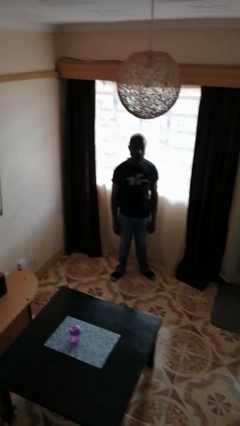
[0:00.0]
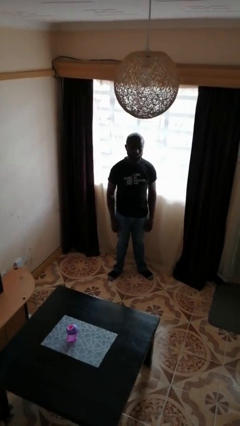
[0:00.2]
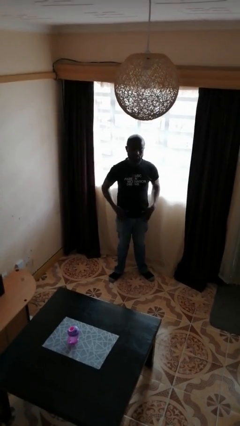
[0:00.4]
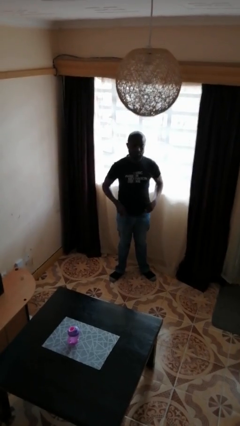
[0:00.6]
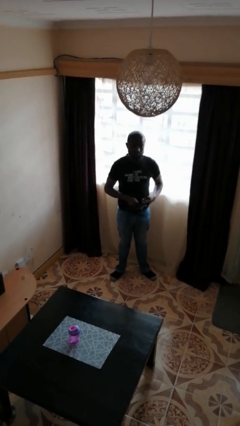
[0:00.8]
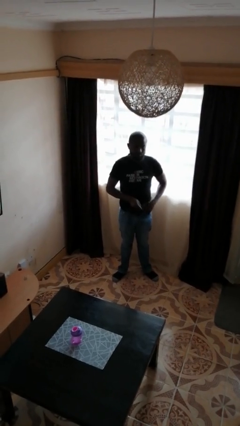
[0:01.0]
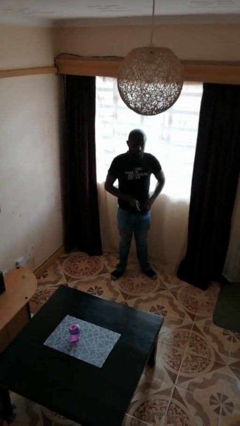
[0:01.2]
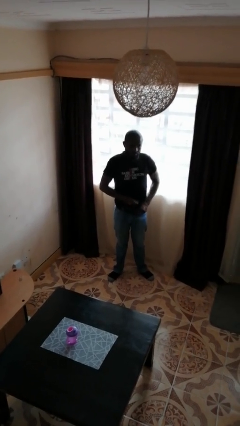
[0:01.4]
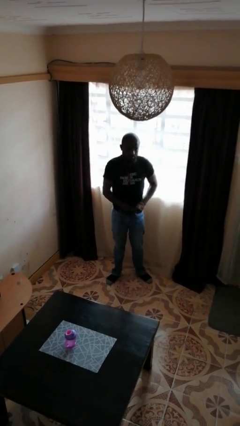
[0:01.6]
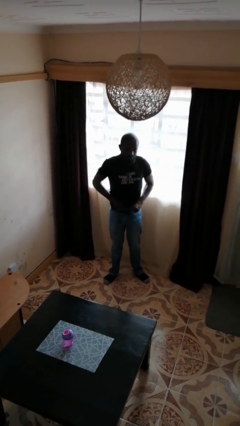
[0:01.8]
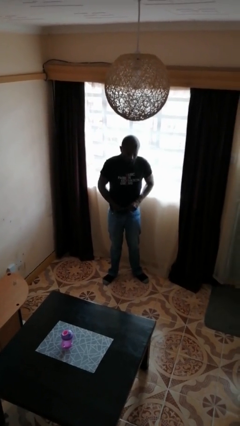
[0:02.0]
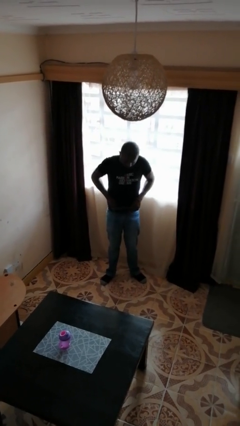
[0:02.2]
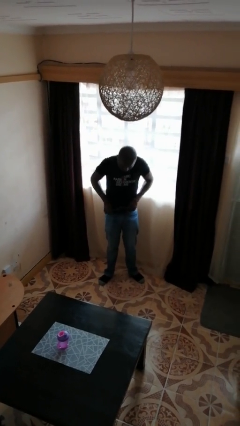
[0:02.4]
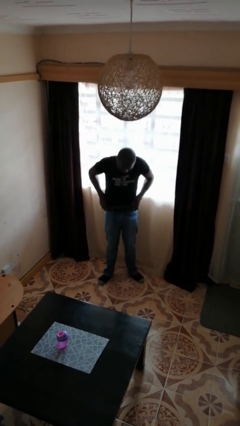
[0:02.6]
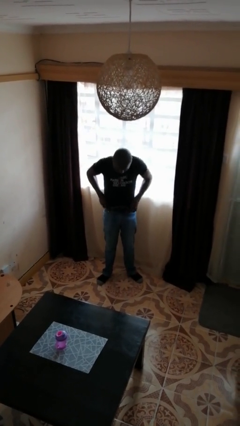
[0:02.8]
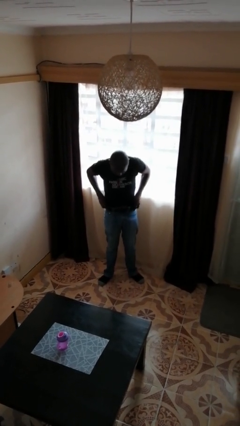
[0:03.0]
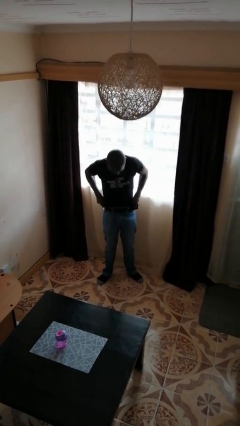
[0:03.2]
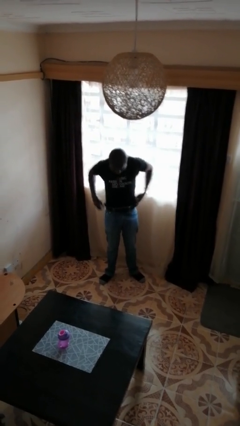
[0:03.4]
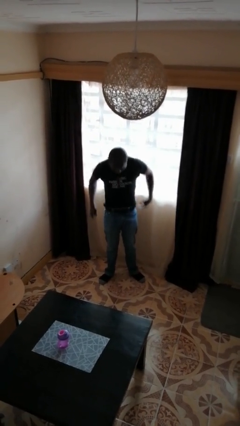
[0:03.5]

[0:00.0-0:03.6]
person tucks in shirt

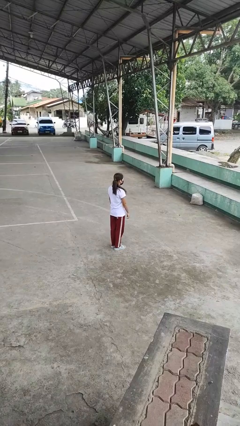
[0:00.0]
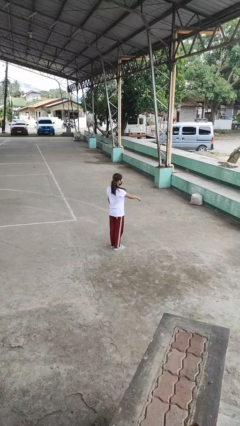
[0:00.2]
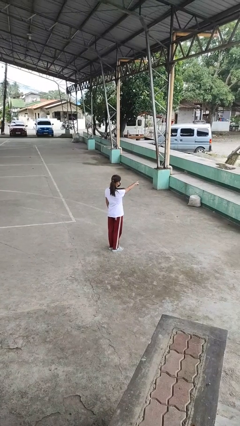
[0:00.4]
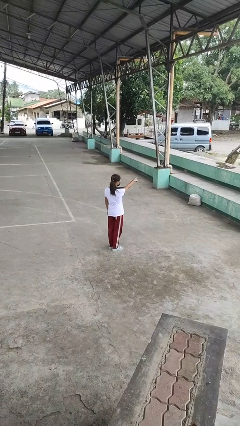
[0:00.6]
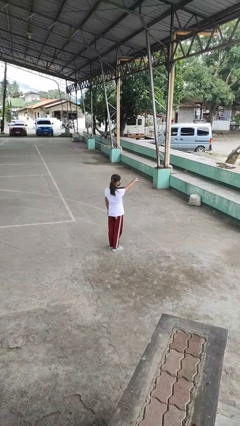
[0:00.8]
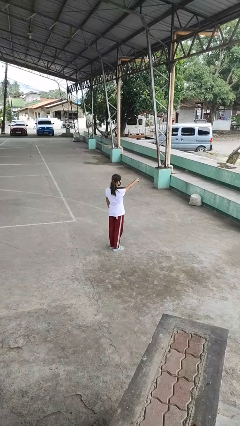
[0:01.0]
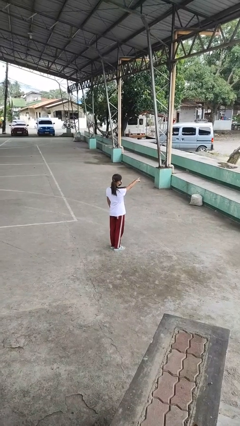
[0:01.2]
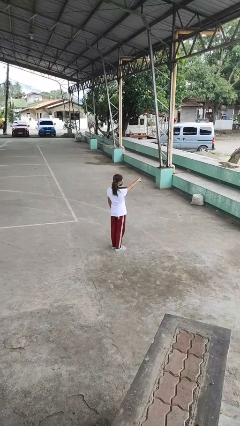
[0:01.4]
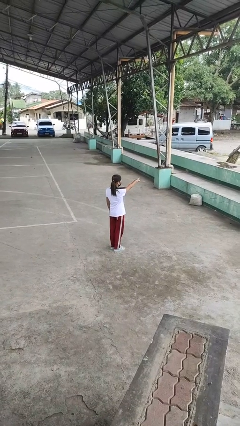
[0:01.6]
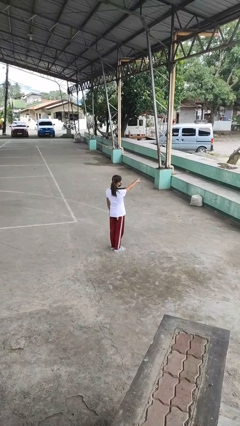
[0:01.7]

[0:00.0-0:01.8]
person points at person

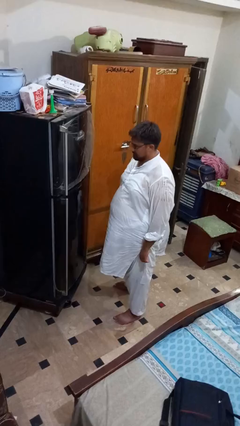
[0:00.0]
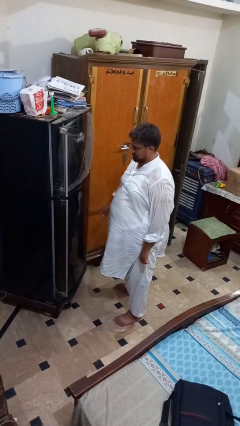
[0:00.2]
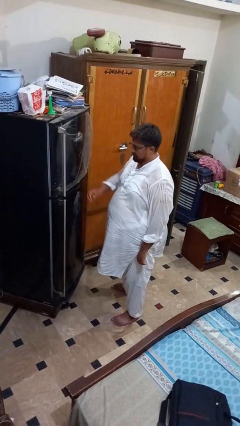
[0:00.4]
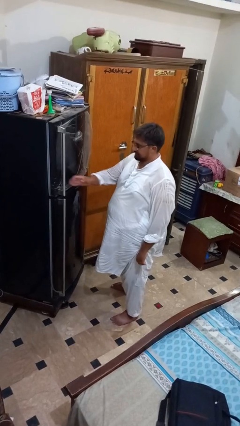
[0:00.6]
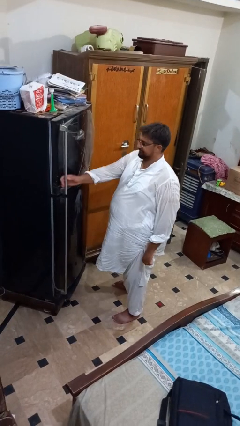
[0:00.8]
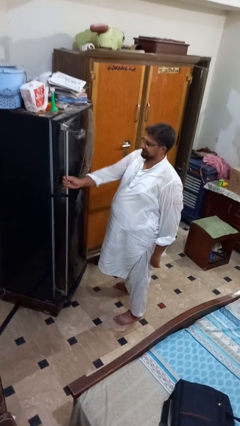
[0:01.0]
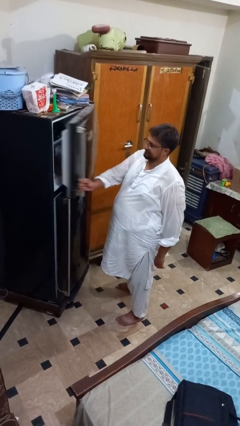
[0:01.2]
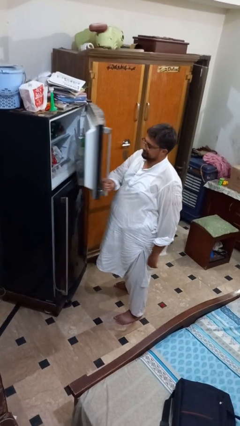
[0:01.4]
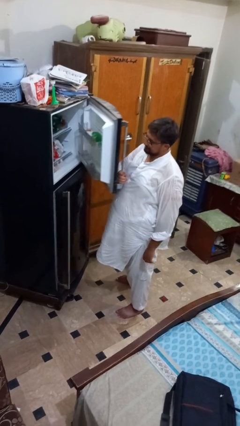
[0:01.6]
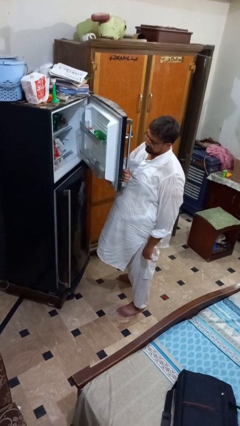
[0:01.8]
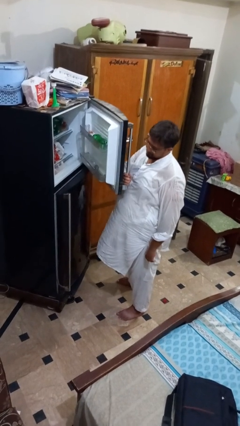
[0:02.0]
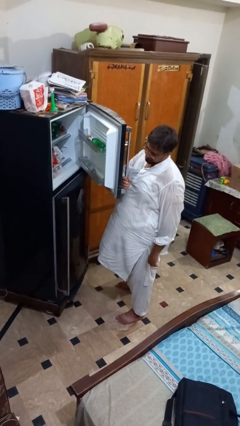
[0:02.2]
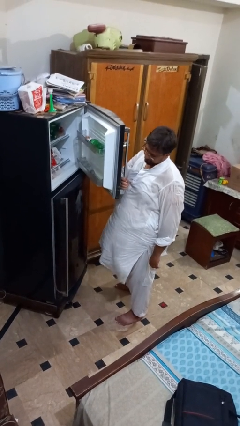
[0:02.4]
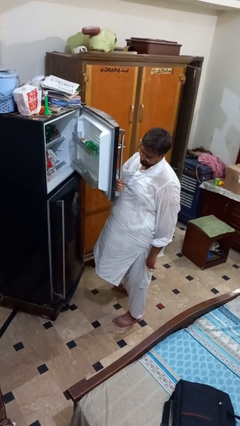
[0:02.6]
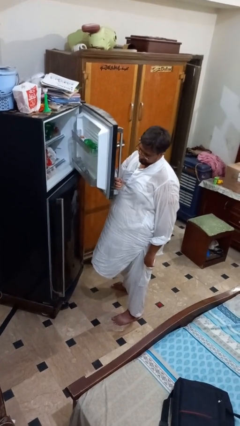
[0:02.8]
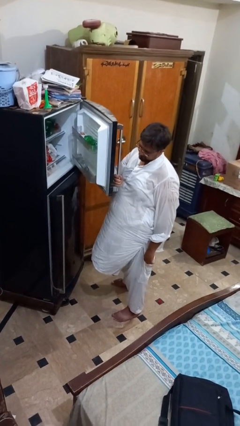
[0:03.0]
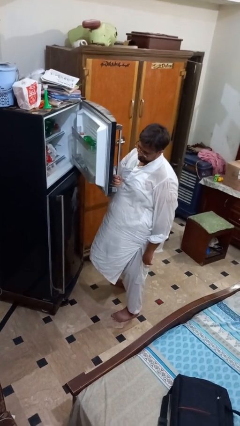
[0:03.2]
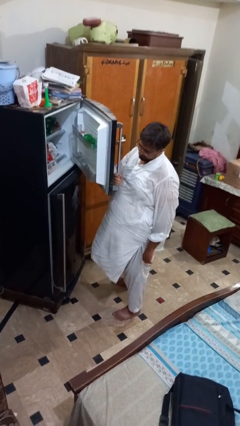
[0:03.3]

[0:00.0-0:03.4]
person opens refrigerator

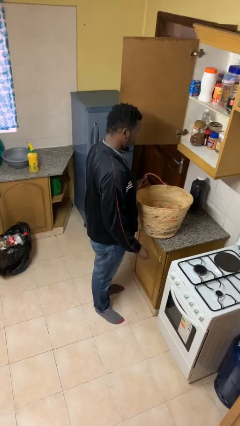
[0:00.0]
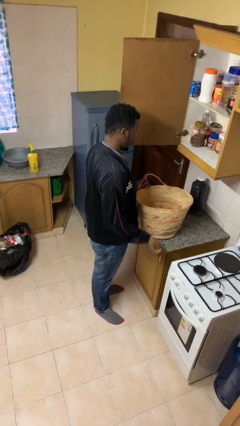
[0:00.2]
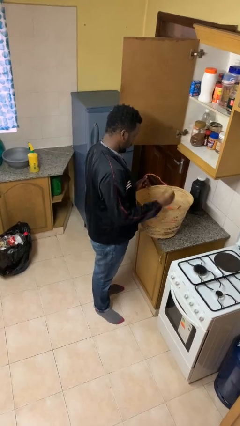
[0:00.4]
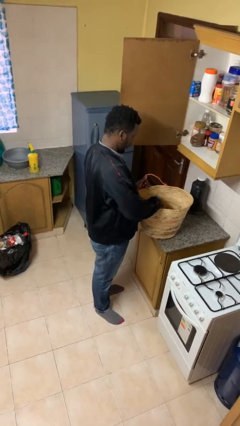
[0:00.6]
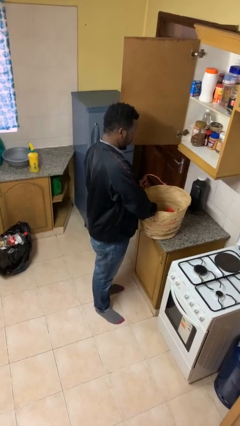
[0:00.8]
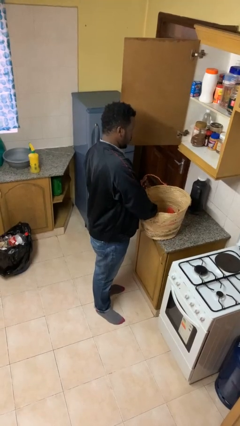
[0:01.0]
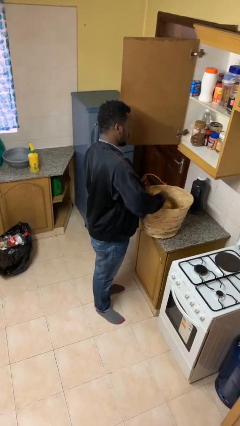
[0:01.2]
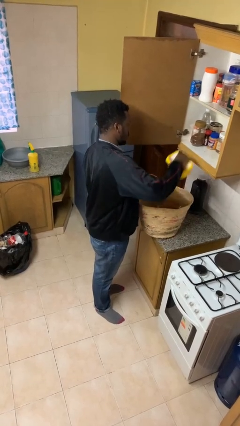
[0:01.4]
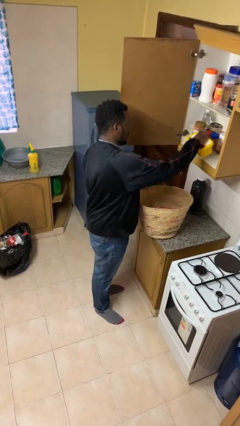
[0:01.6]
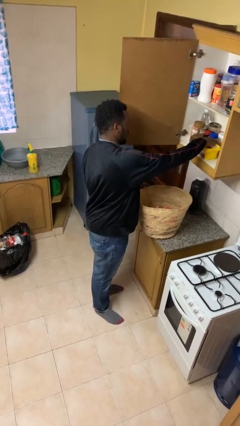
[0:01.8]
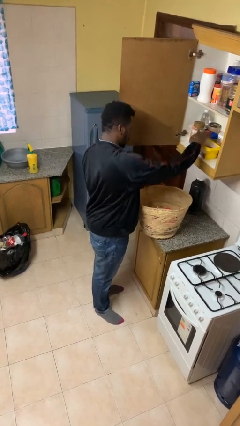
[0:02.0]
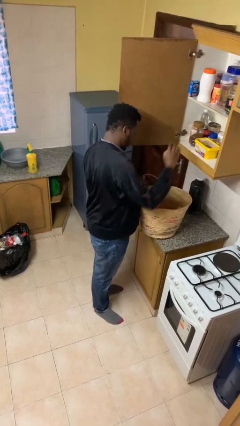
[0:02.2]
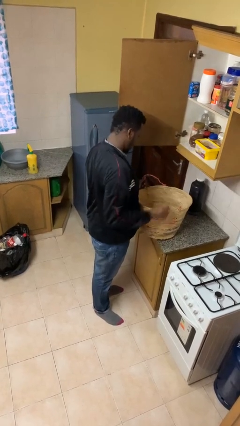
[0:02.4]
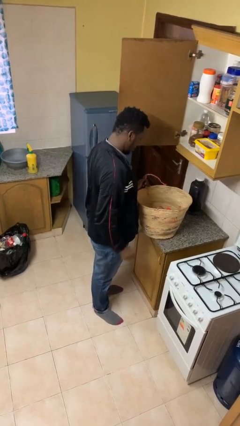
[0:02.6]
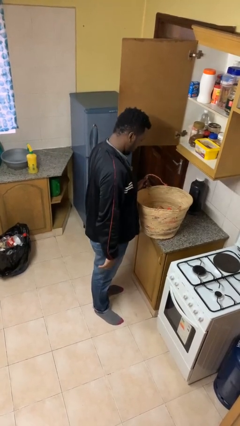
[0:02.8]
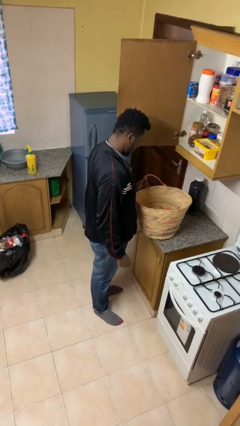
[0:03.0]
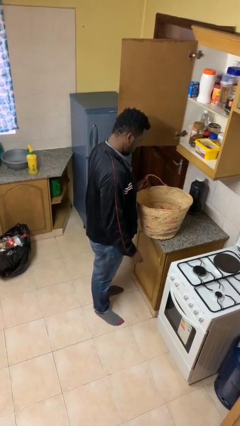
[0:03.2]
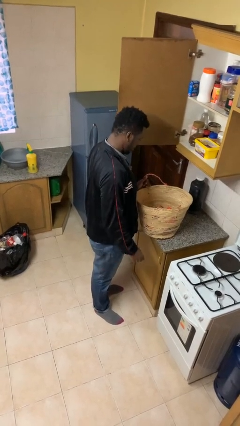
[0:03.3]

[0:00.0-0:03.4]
person loads groceries into cabinet

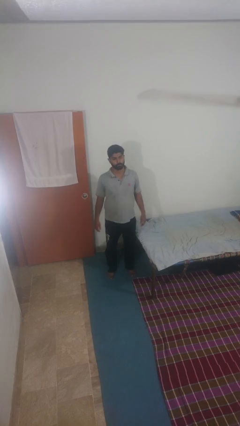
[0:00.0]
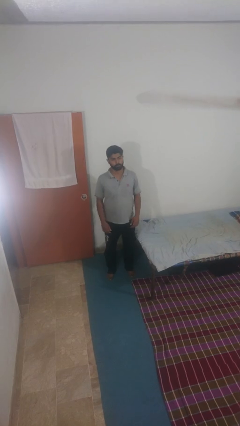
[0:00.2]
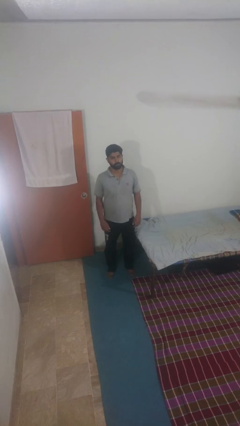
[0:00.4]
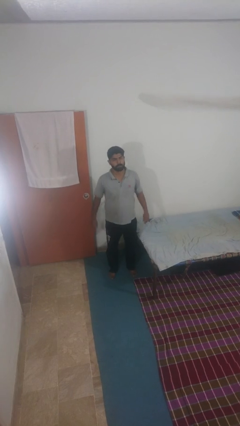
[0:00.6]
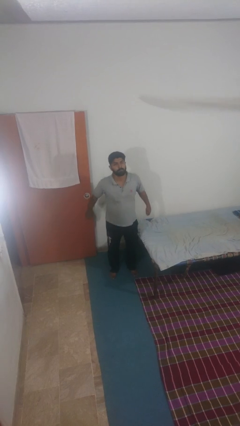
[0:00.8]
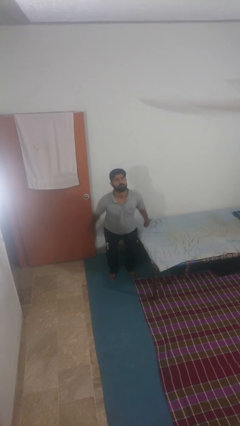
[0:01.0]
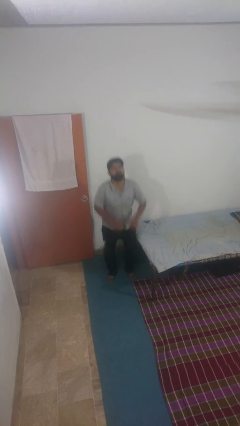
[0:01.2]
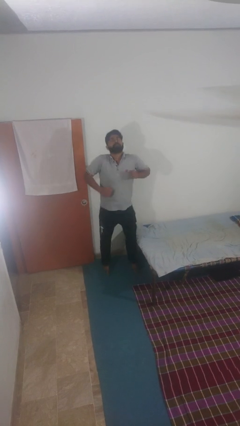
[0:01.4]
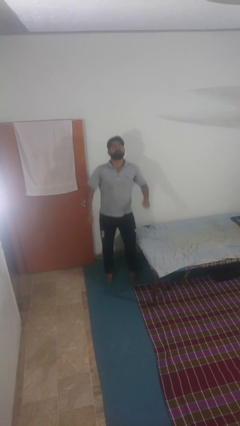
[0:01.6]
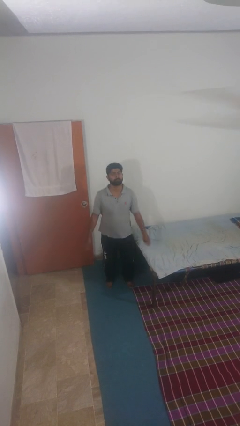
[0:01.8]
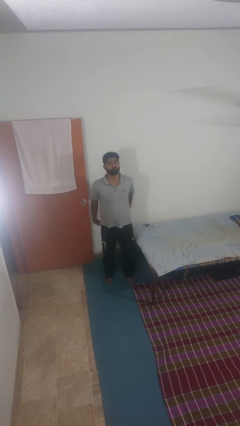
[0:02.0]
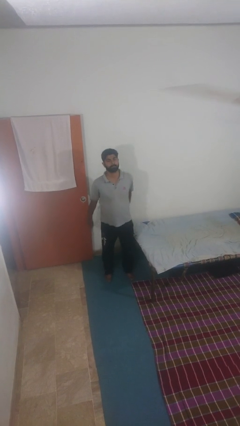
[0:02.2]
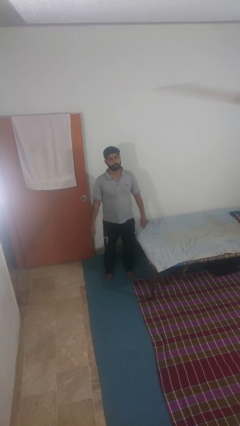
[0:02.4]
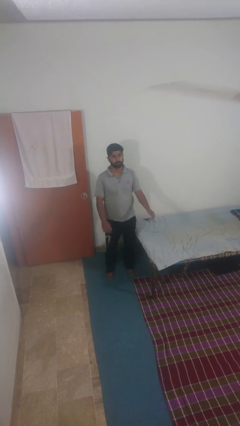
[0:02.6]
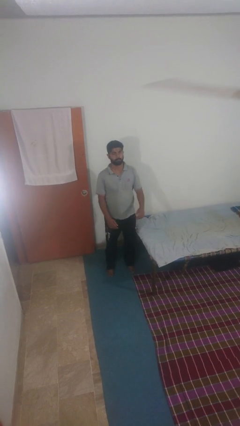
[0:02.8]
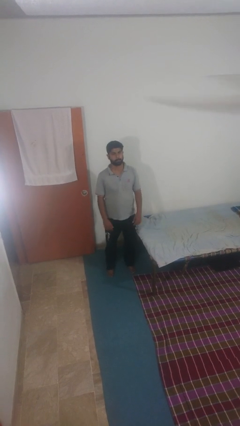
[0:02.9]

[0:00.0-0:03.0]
person jumps

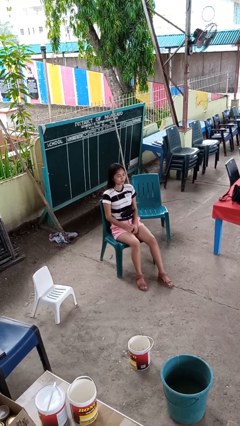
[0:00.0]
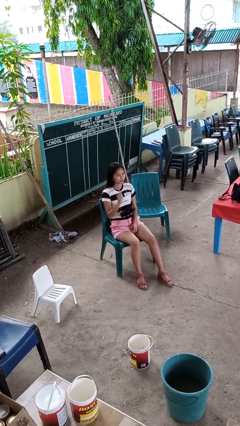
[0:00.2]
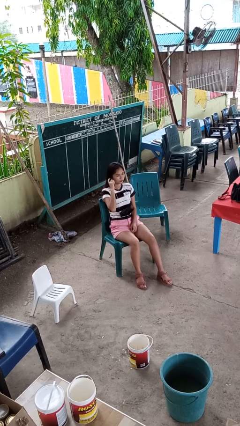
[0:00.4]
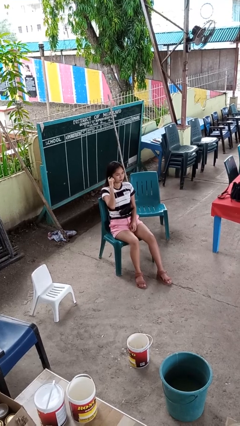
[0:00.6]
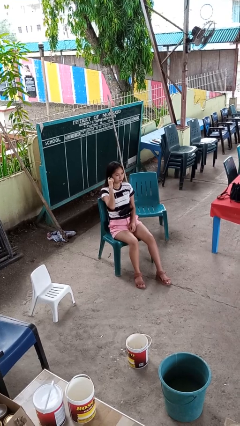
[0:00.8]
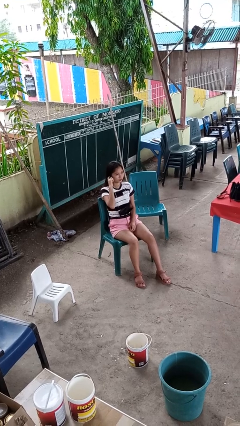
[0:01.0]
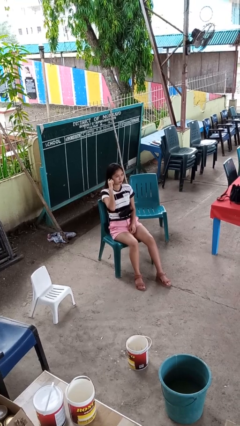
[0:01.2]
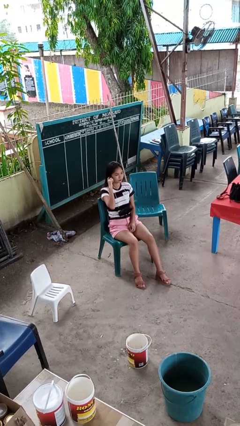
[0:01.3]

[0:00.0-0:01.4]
person gestures listen closely

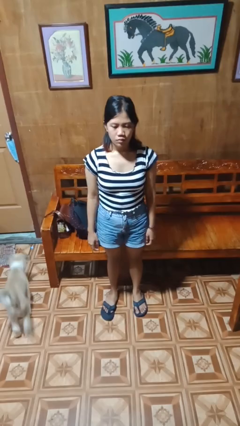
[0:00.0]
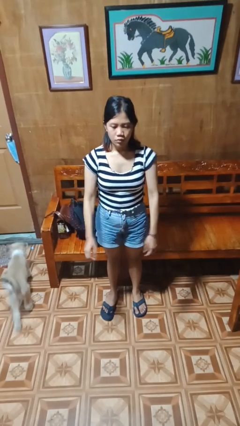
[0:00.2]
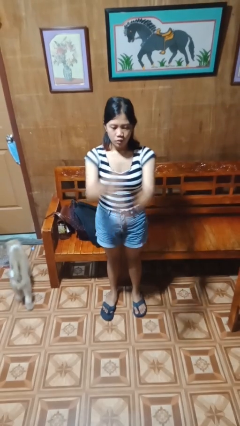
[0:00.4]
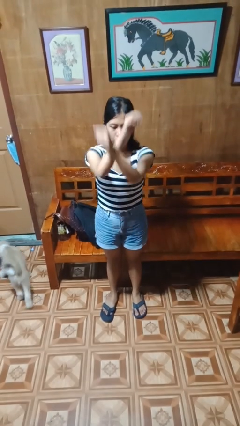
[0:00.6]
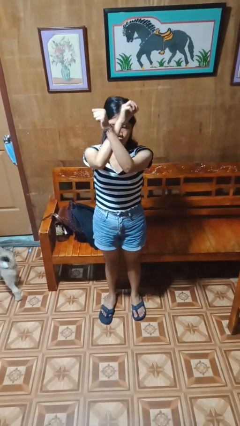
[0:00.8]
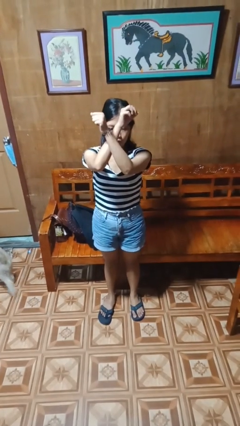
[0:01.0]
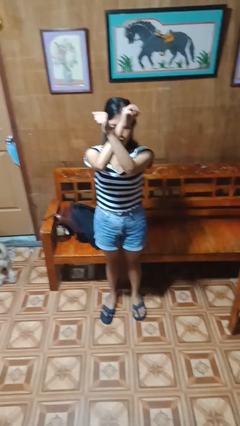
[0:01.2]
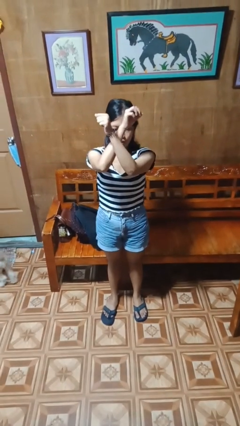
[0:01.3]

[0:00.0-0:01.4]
person gestures arms x
